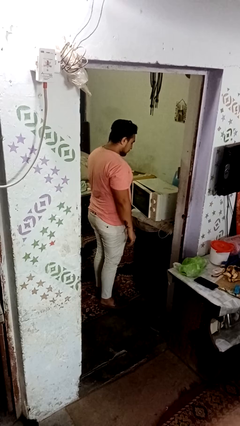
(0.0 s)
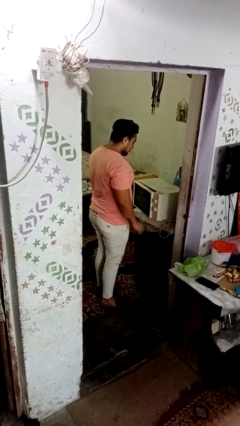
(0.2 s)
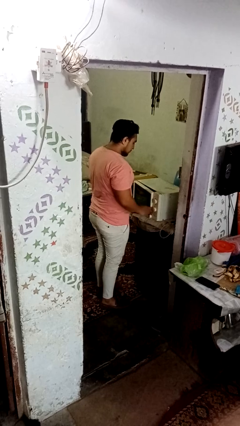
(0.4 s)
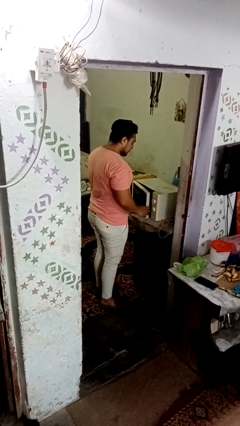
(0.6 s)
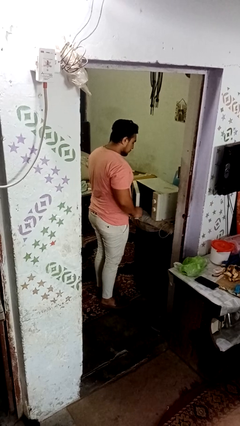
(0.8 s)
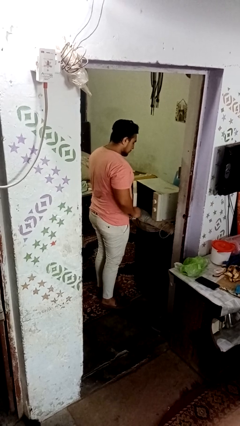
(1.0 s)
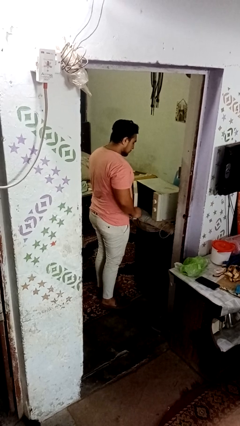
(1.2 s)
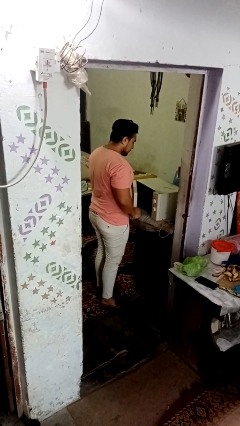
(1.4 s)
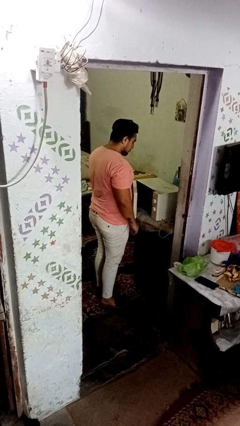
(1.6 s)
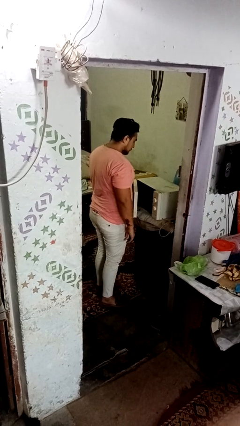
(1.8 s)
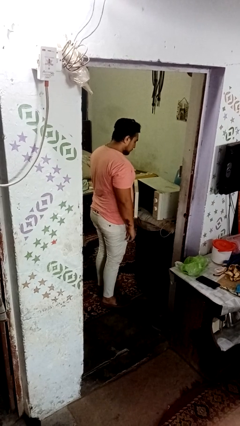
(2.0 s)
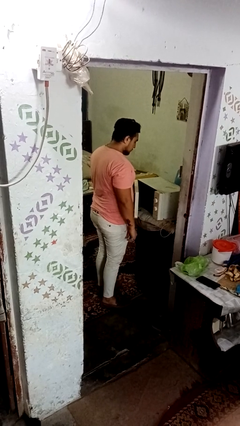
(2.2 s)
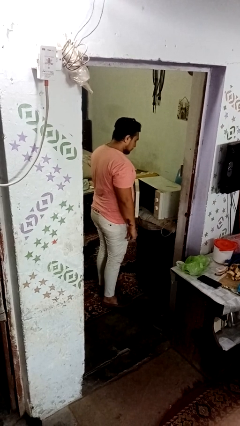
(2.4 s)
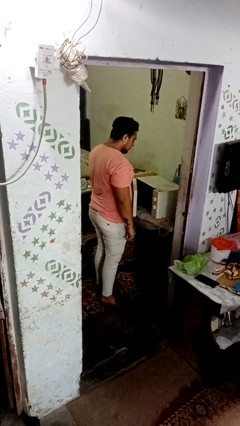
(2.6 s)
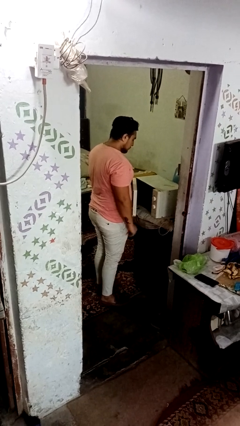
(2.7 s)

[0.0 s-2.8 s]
person opens dishwasher

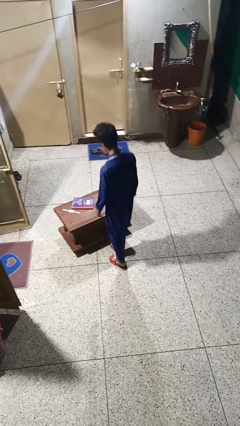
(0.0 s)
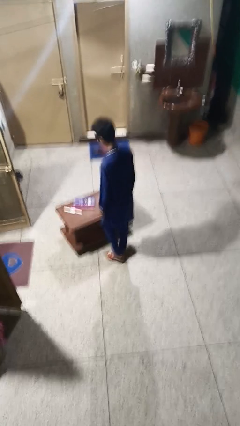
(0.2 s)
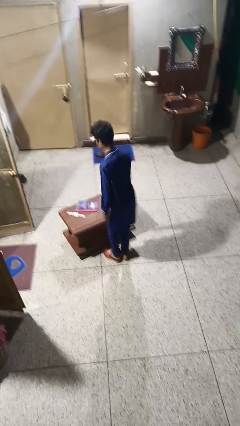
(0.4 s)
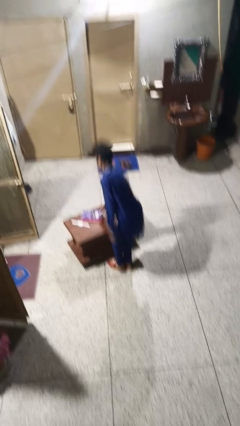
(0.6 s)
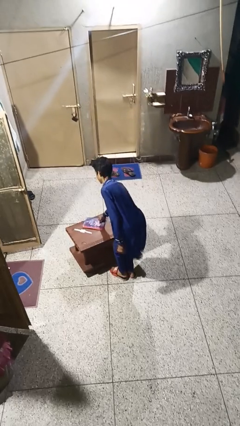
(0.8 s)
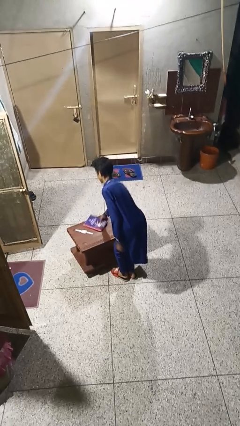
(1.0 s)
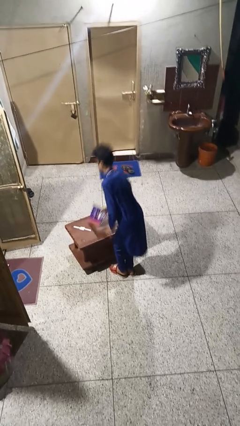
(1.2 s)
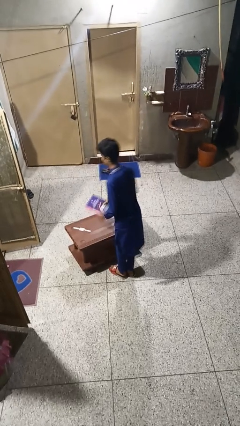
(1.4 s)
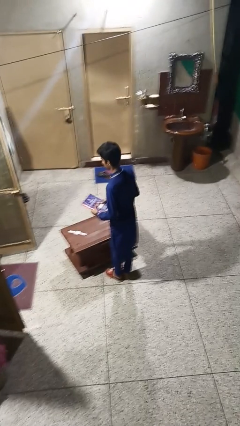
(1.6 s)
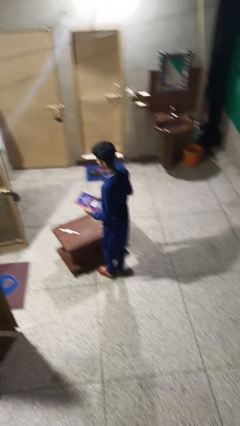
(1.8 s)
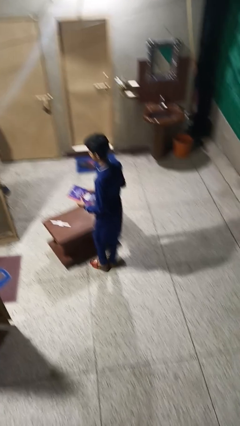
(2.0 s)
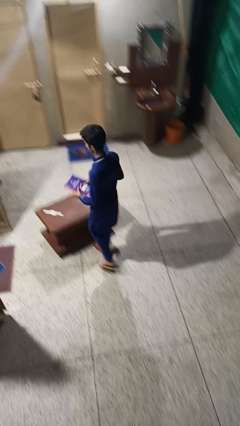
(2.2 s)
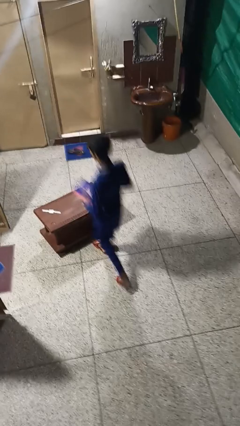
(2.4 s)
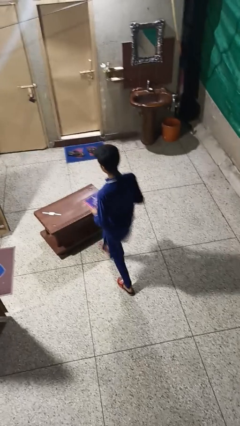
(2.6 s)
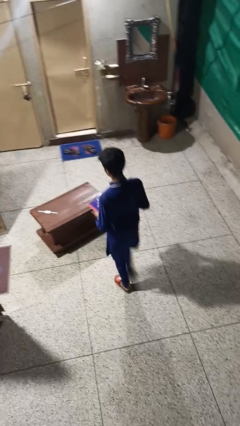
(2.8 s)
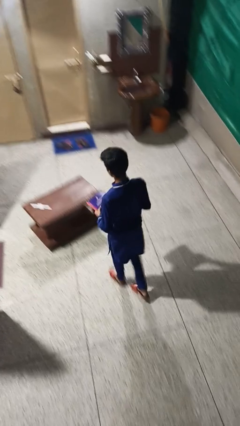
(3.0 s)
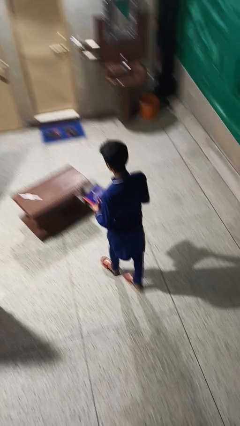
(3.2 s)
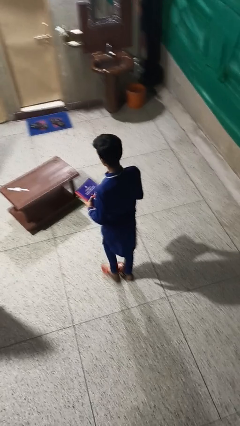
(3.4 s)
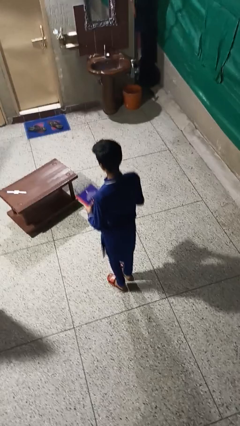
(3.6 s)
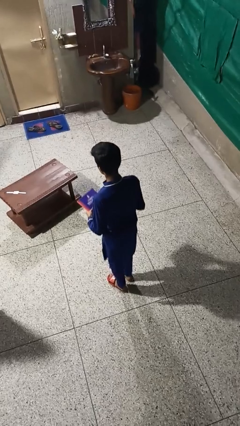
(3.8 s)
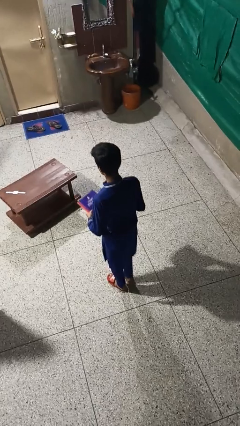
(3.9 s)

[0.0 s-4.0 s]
person picks up object from table

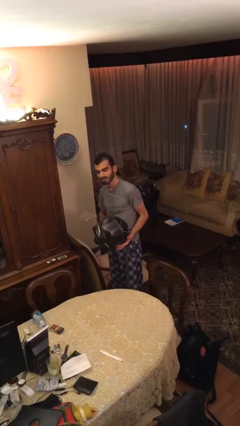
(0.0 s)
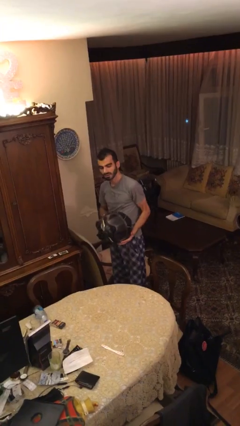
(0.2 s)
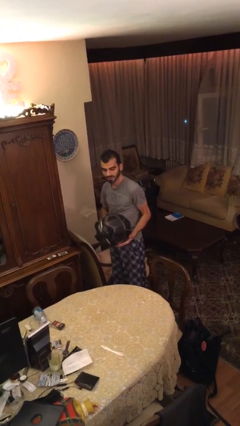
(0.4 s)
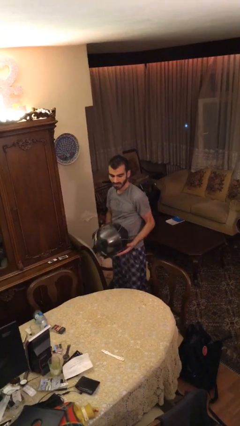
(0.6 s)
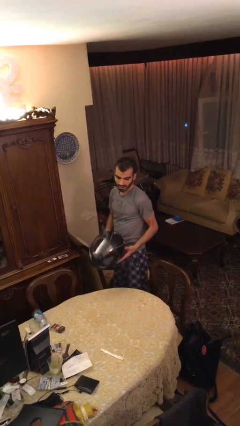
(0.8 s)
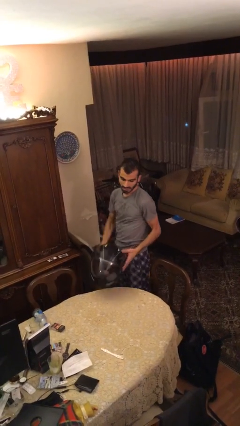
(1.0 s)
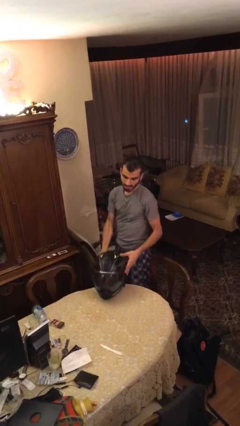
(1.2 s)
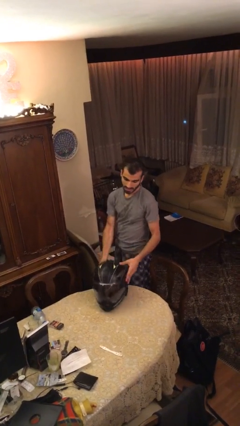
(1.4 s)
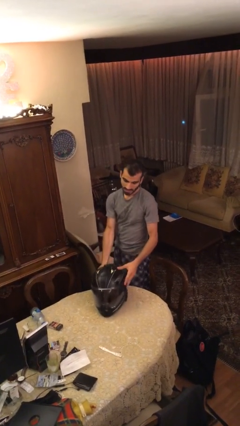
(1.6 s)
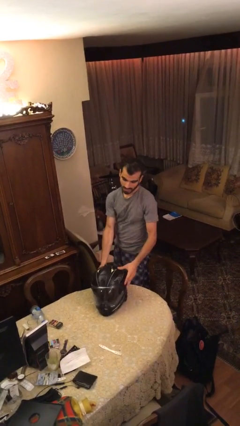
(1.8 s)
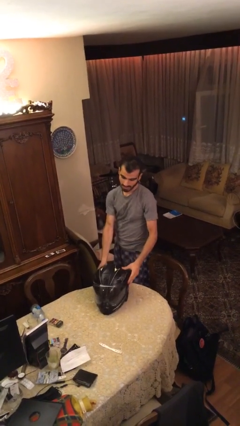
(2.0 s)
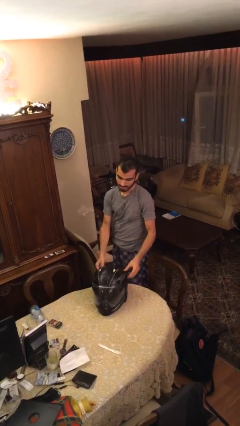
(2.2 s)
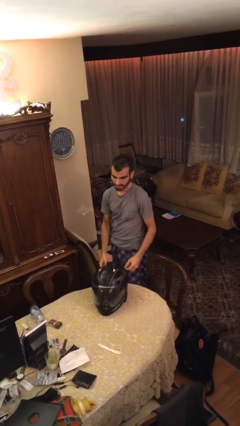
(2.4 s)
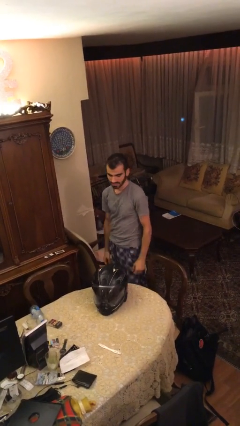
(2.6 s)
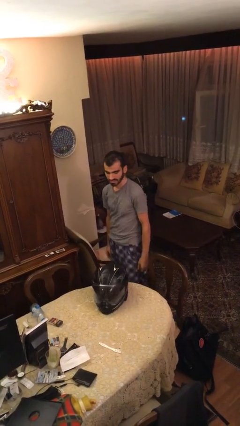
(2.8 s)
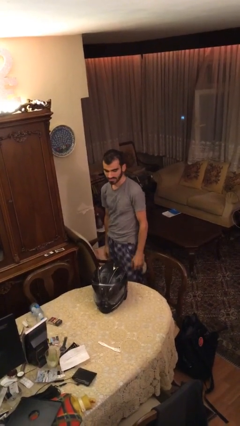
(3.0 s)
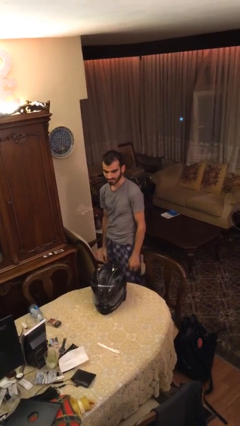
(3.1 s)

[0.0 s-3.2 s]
person puts down object on table

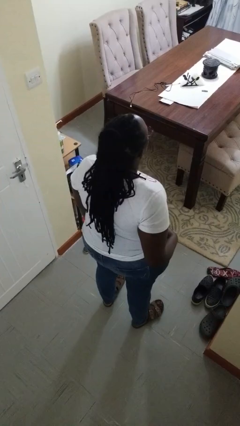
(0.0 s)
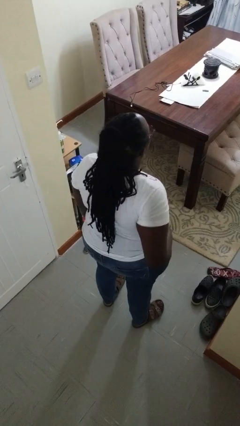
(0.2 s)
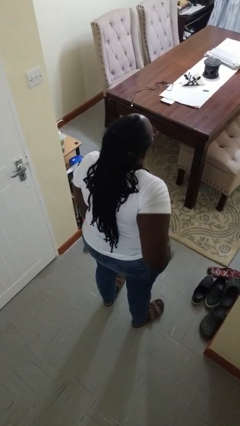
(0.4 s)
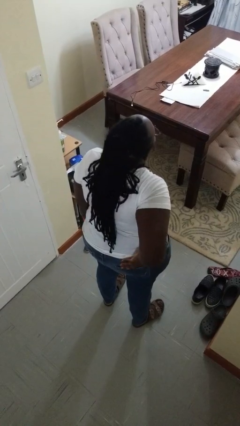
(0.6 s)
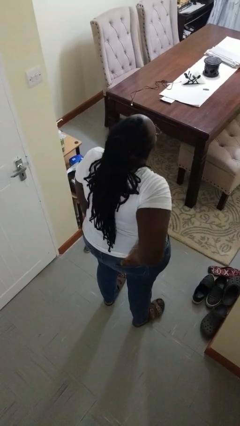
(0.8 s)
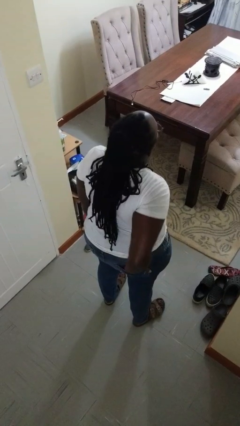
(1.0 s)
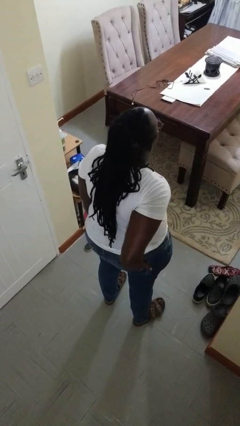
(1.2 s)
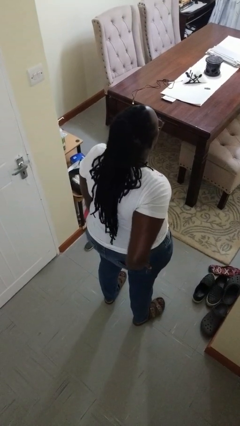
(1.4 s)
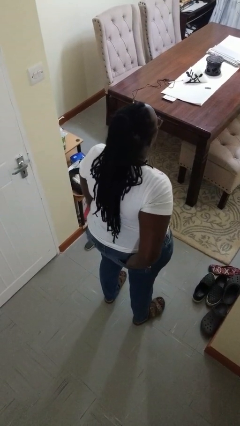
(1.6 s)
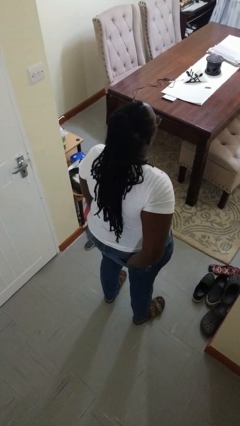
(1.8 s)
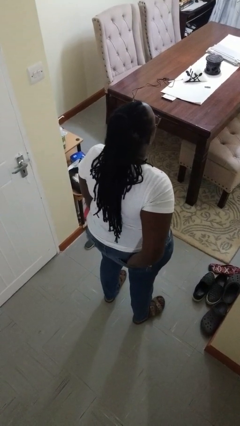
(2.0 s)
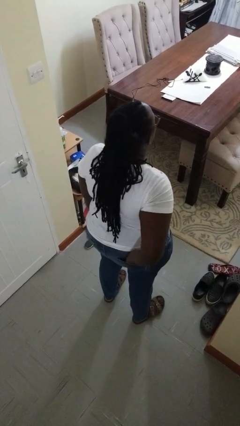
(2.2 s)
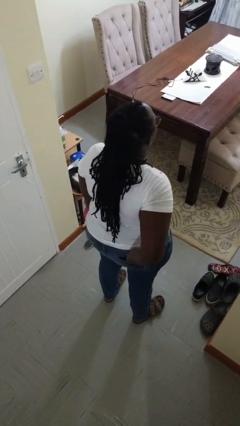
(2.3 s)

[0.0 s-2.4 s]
person puts hands in back pockets

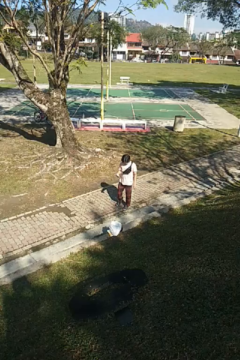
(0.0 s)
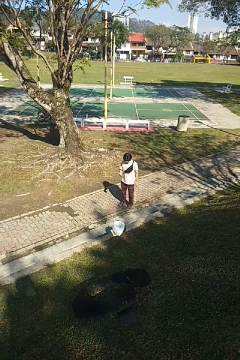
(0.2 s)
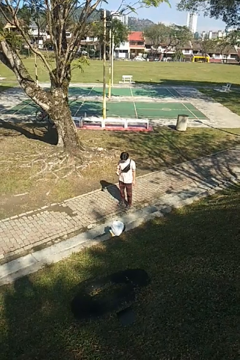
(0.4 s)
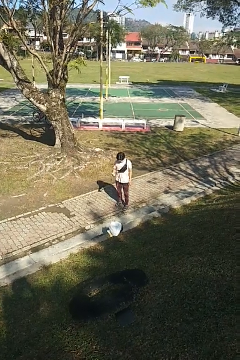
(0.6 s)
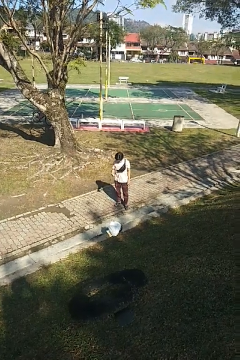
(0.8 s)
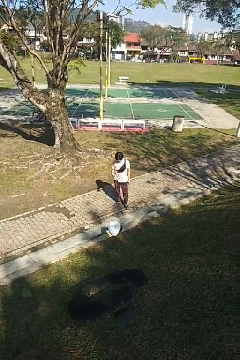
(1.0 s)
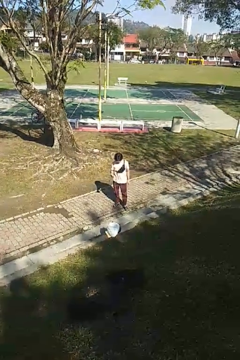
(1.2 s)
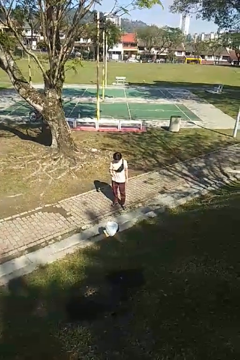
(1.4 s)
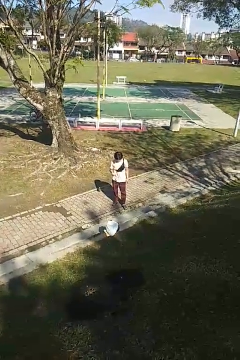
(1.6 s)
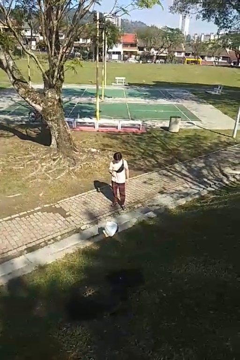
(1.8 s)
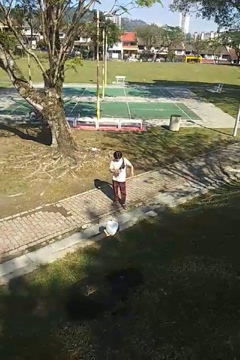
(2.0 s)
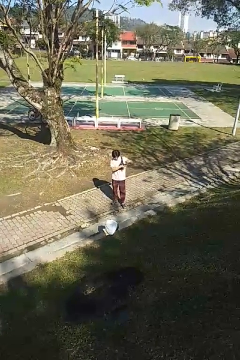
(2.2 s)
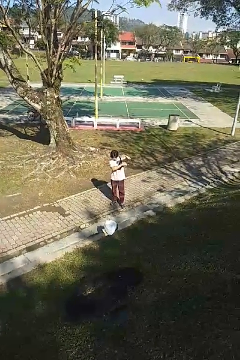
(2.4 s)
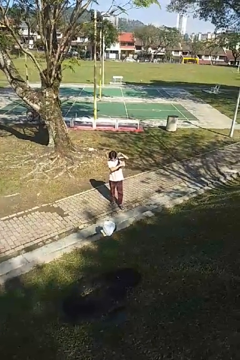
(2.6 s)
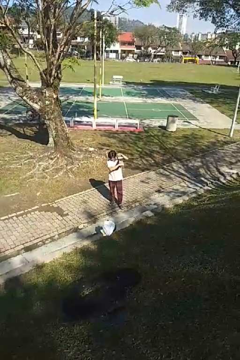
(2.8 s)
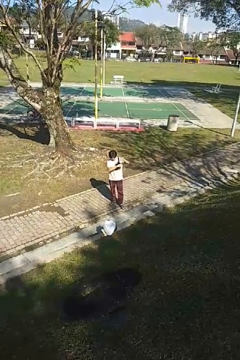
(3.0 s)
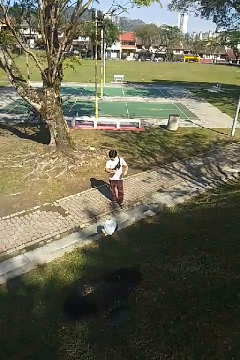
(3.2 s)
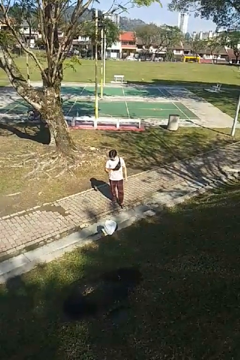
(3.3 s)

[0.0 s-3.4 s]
person applies deodorant

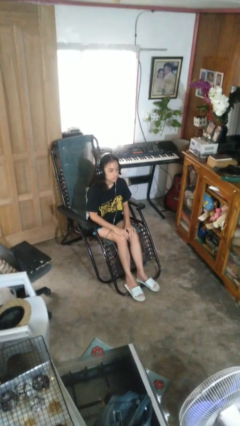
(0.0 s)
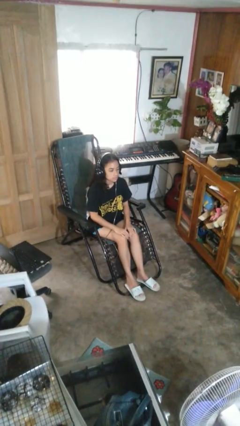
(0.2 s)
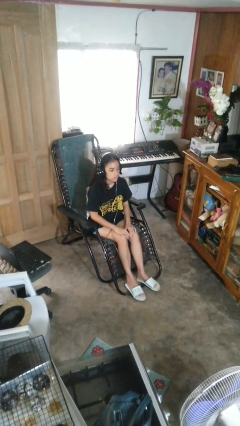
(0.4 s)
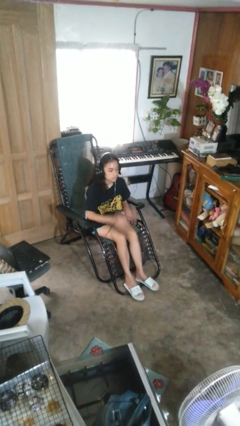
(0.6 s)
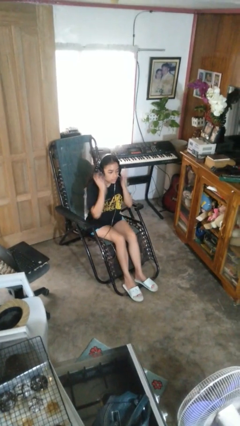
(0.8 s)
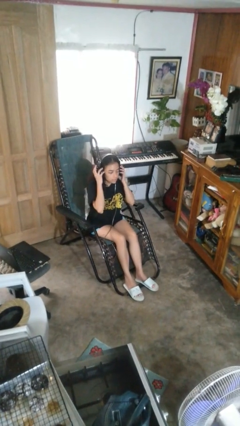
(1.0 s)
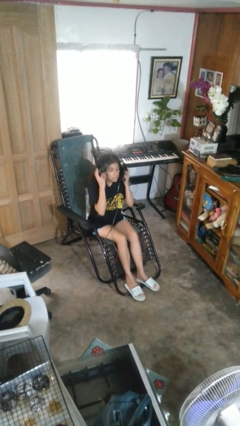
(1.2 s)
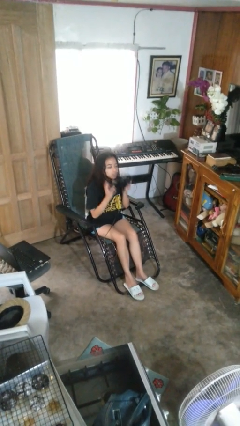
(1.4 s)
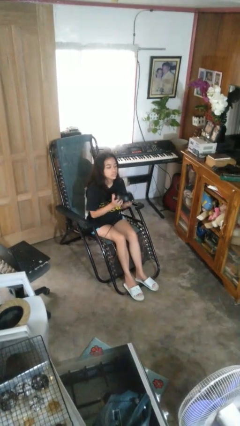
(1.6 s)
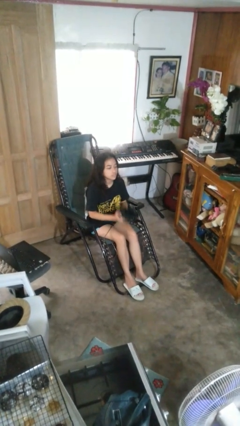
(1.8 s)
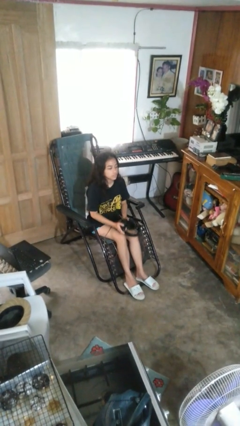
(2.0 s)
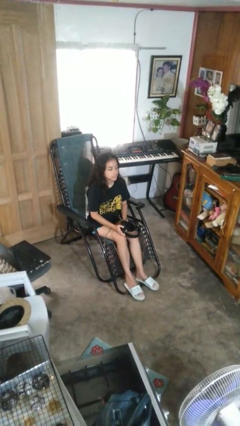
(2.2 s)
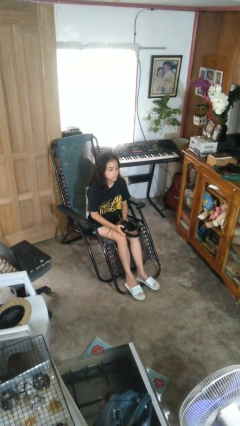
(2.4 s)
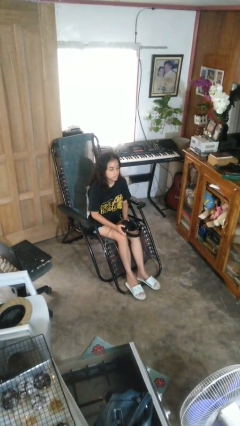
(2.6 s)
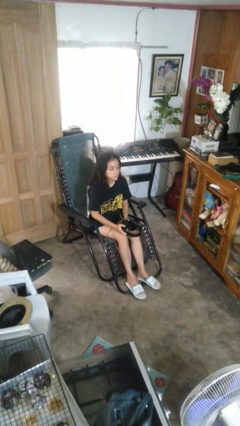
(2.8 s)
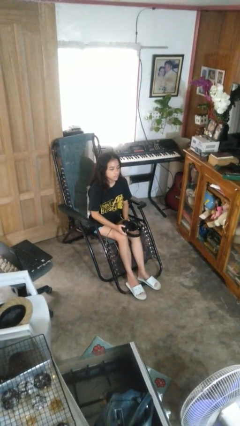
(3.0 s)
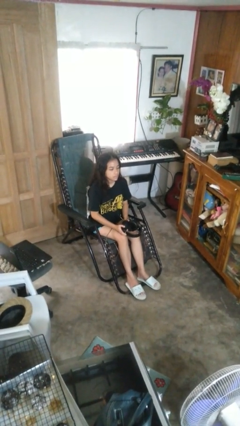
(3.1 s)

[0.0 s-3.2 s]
person takes off headphones
